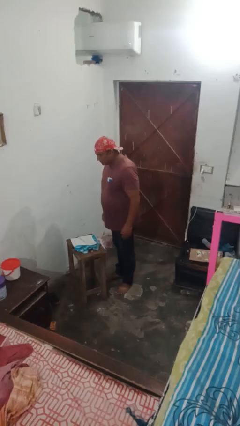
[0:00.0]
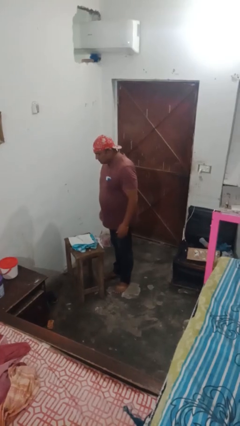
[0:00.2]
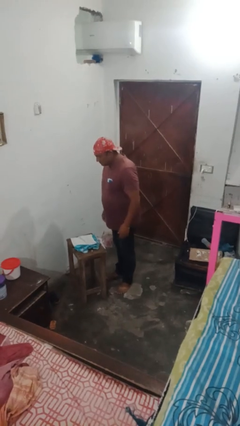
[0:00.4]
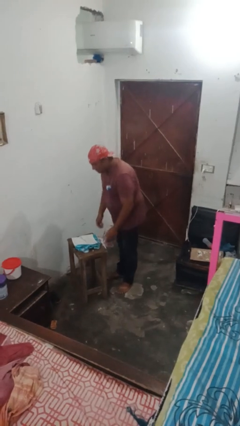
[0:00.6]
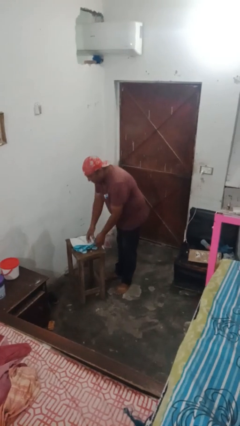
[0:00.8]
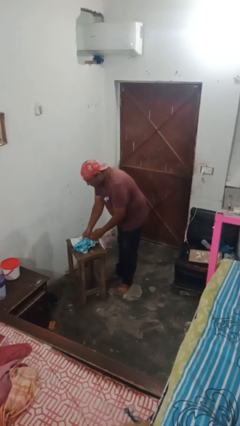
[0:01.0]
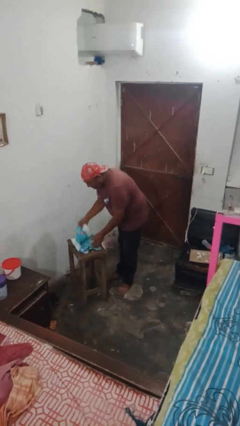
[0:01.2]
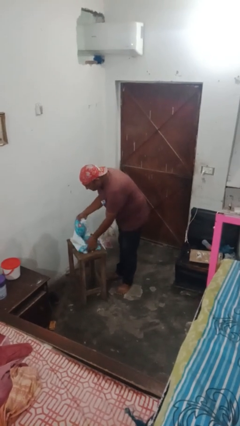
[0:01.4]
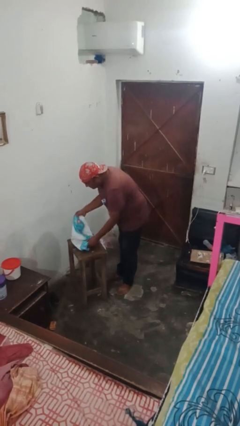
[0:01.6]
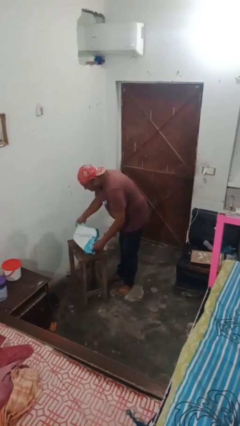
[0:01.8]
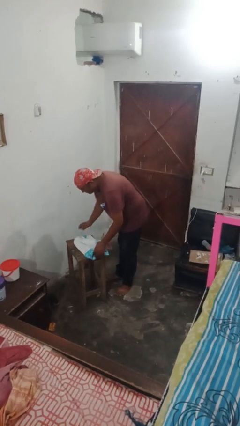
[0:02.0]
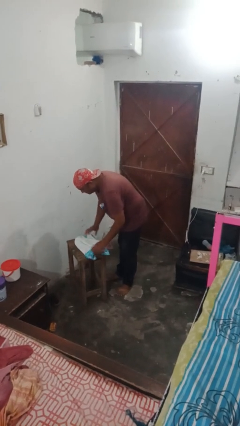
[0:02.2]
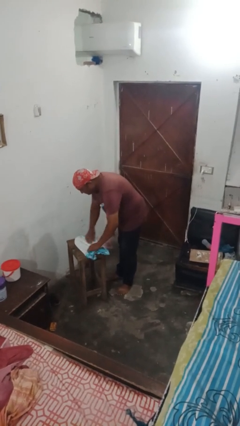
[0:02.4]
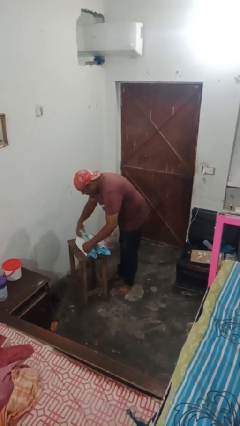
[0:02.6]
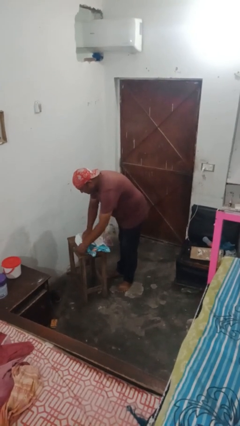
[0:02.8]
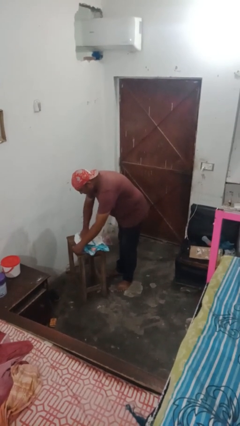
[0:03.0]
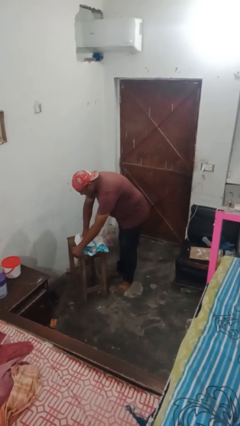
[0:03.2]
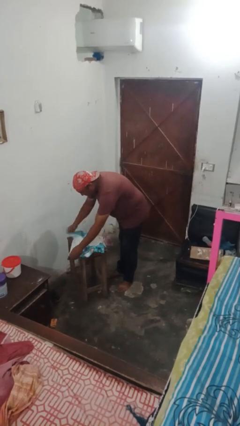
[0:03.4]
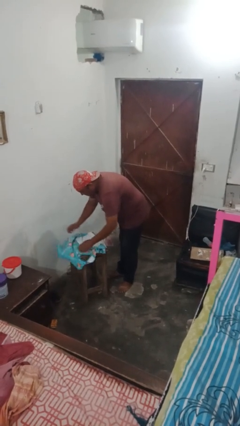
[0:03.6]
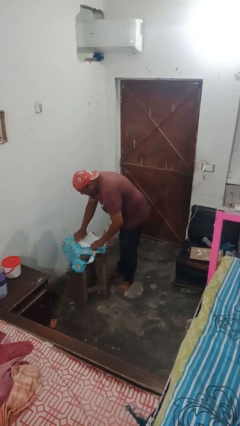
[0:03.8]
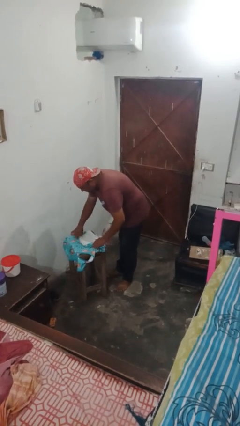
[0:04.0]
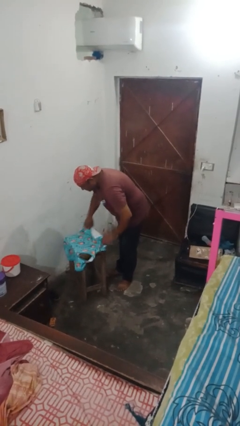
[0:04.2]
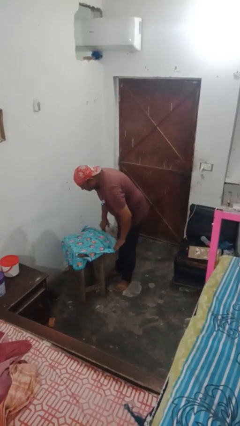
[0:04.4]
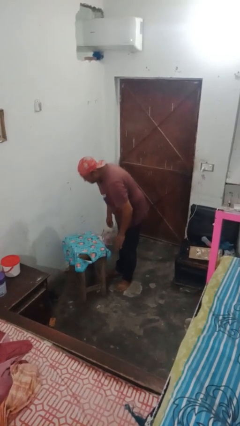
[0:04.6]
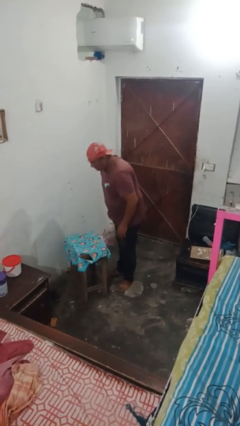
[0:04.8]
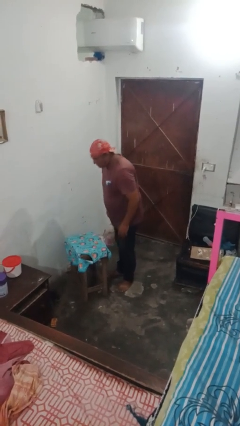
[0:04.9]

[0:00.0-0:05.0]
person folds tablecloth

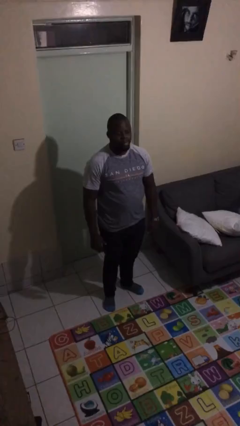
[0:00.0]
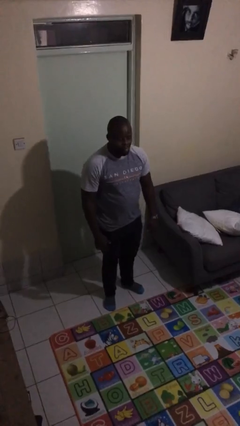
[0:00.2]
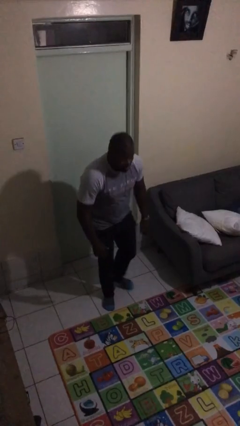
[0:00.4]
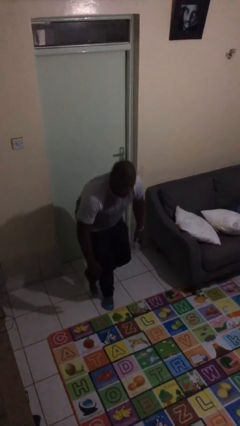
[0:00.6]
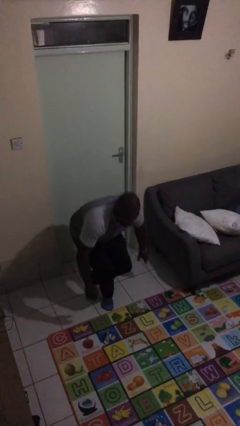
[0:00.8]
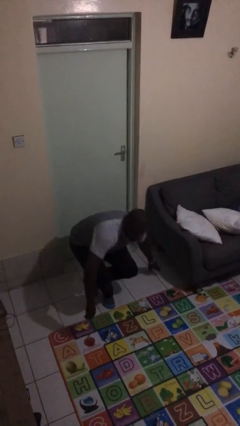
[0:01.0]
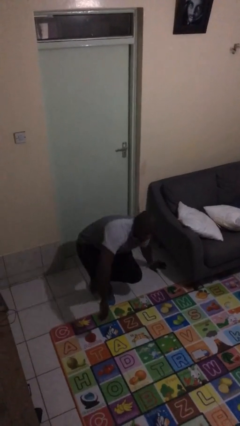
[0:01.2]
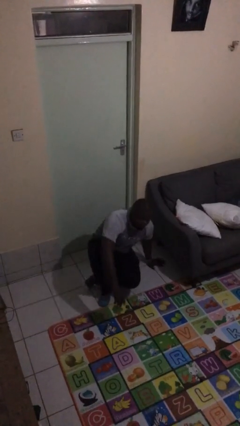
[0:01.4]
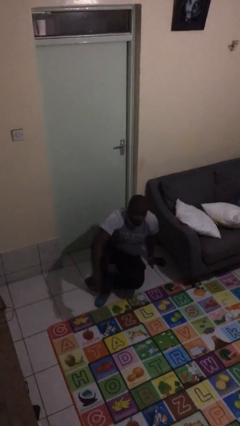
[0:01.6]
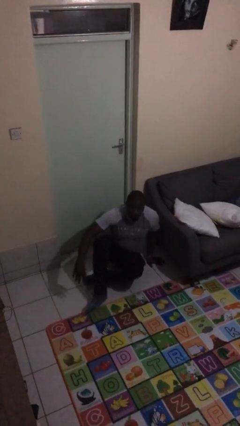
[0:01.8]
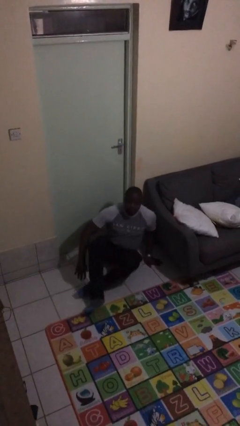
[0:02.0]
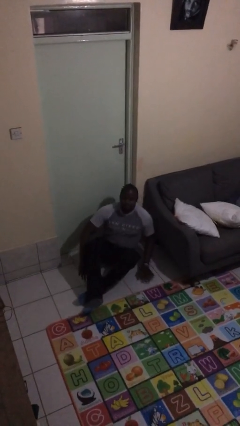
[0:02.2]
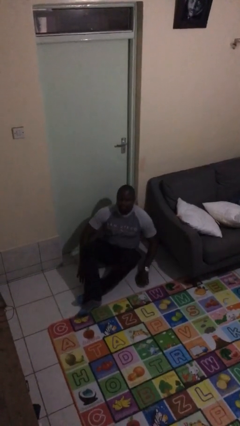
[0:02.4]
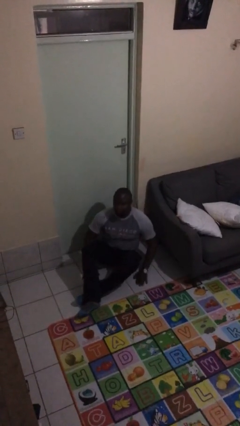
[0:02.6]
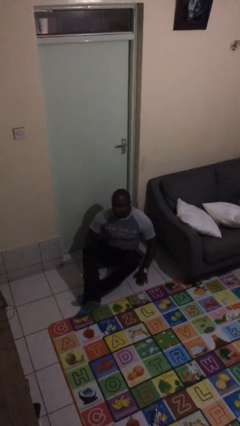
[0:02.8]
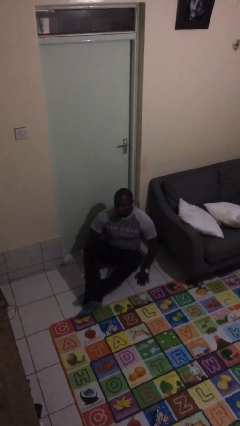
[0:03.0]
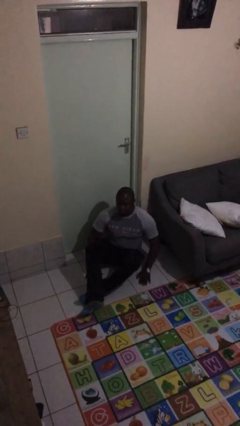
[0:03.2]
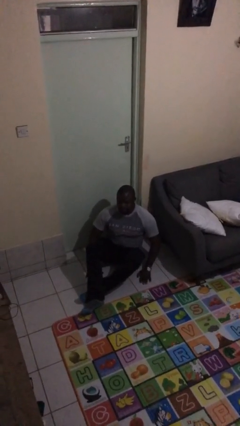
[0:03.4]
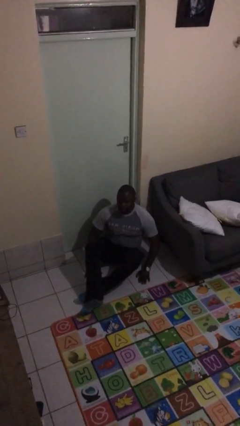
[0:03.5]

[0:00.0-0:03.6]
person sits crisscross

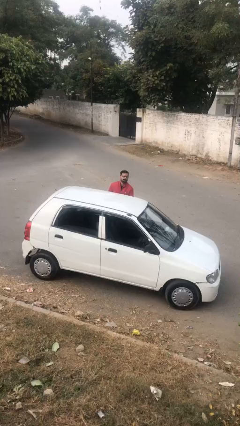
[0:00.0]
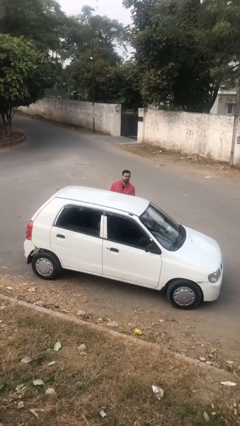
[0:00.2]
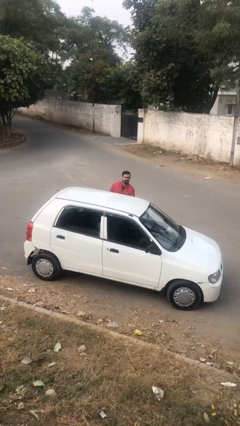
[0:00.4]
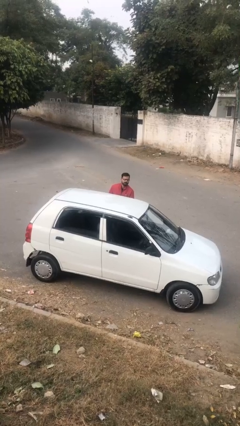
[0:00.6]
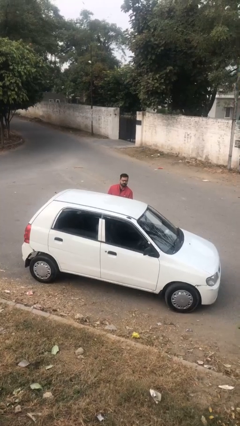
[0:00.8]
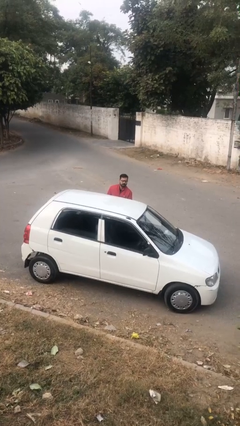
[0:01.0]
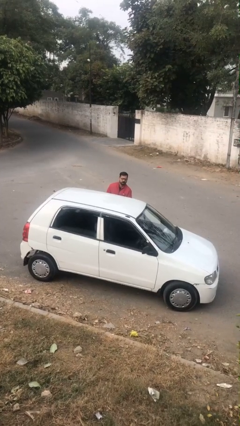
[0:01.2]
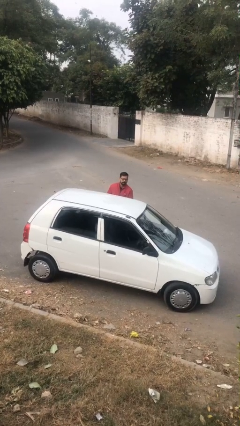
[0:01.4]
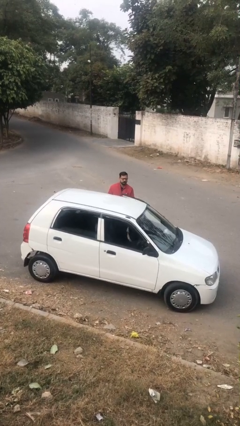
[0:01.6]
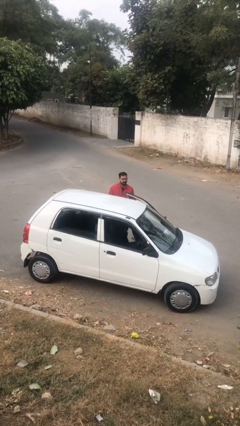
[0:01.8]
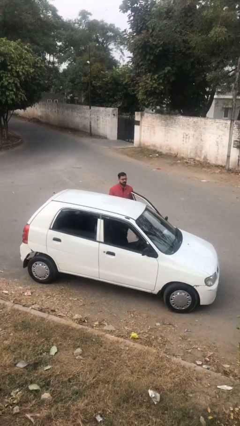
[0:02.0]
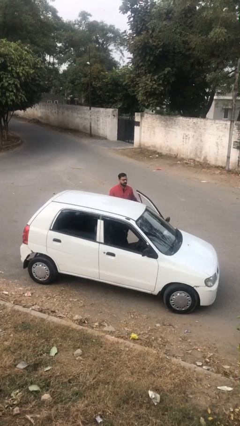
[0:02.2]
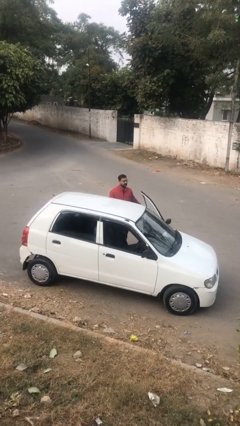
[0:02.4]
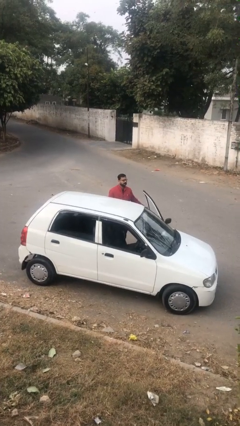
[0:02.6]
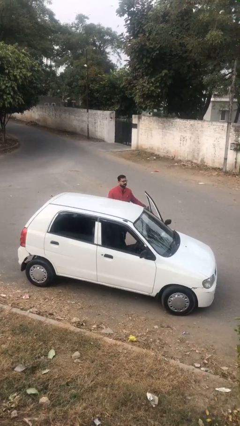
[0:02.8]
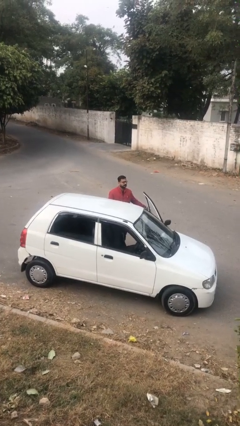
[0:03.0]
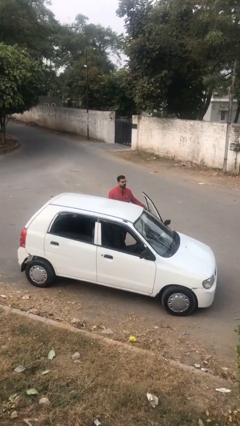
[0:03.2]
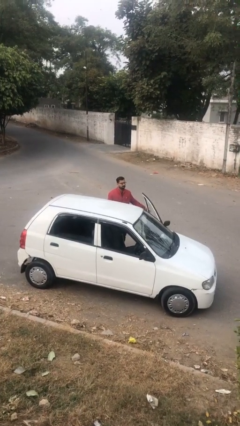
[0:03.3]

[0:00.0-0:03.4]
person opens car door

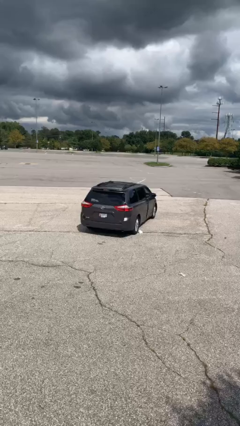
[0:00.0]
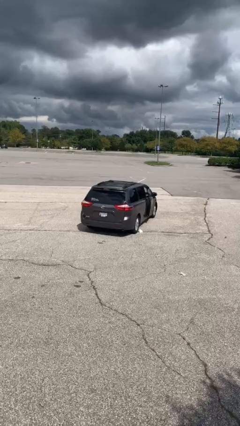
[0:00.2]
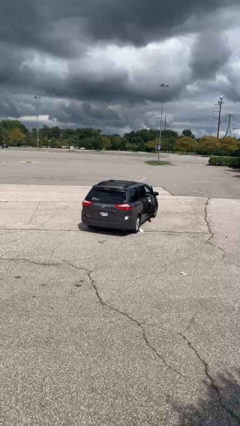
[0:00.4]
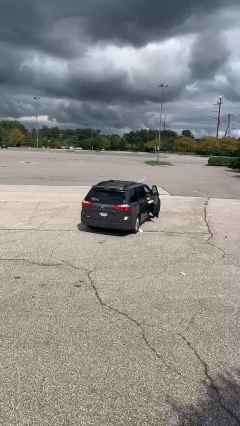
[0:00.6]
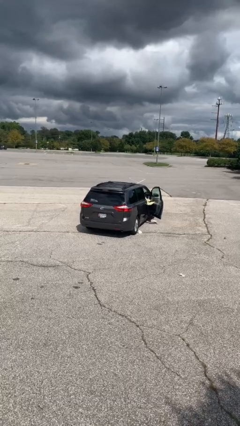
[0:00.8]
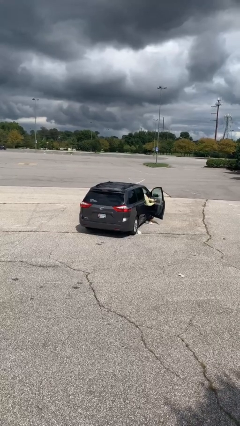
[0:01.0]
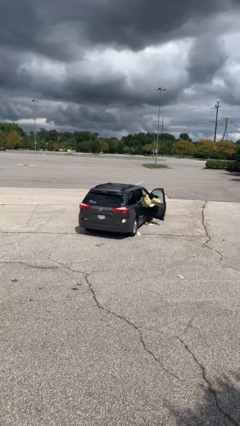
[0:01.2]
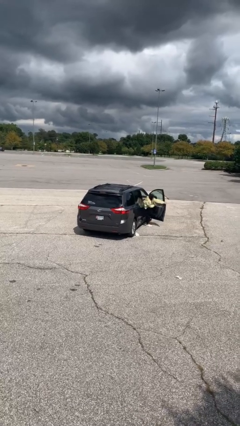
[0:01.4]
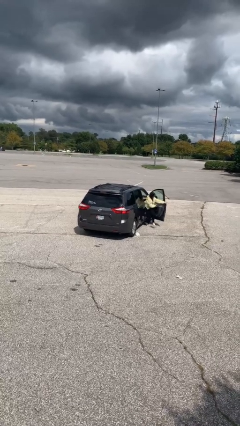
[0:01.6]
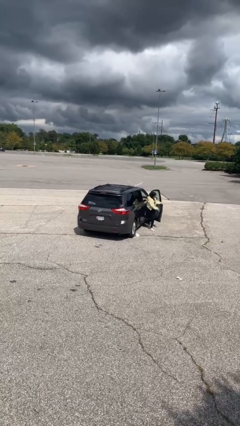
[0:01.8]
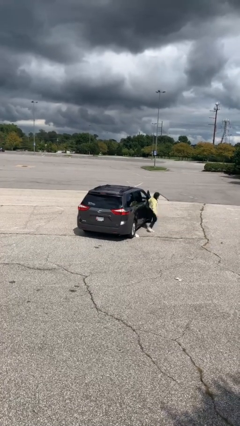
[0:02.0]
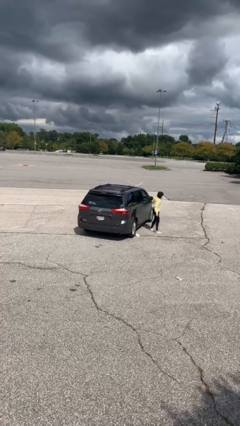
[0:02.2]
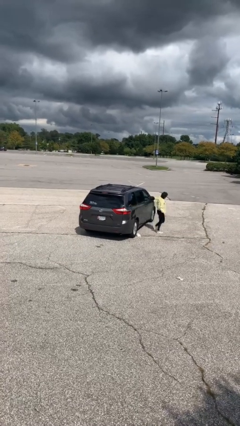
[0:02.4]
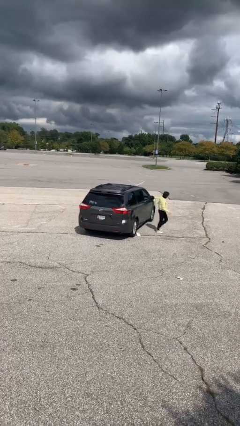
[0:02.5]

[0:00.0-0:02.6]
car drops off person

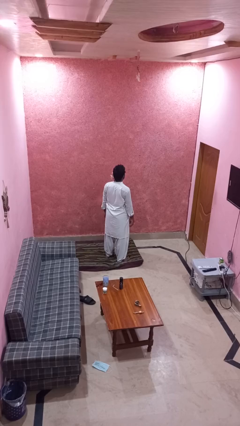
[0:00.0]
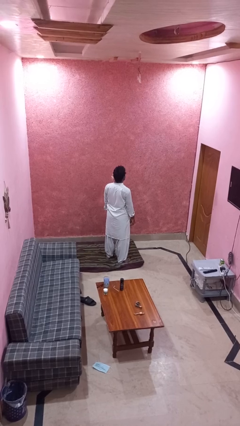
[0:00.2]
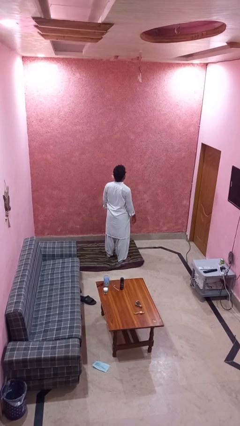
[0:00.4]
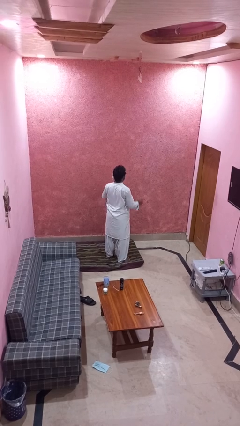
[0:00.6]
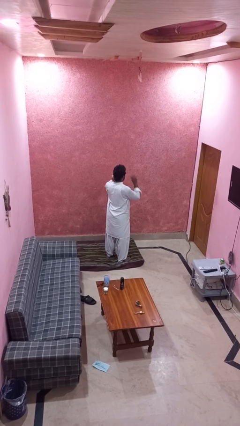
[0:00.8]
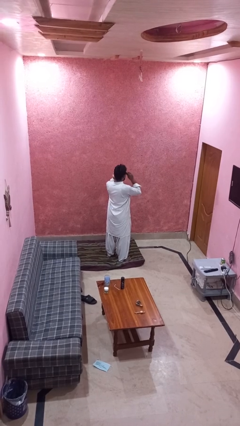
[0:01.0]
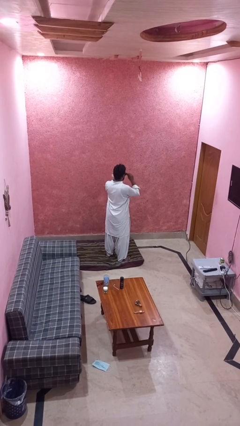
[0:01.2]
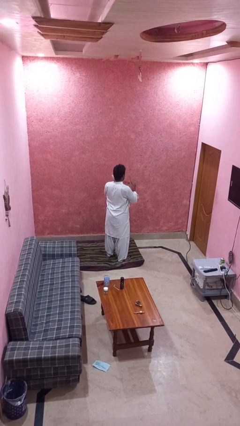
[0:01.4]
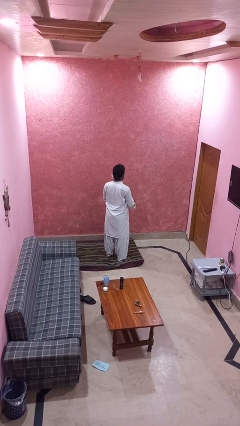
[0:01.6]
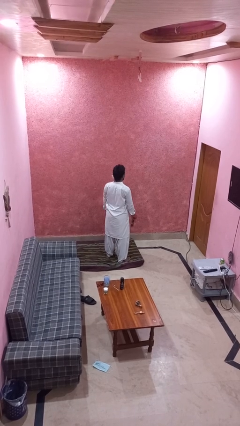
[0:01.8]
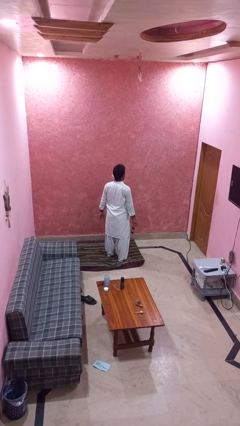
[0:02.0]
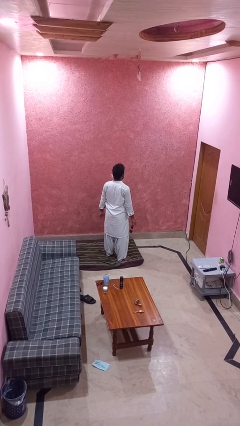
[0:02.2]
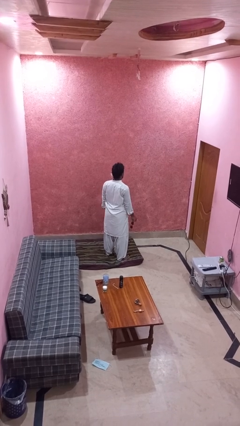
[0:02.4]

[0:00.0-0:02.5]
person takes off sunglasses

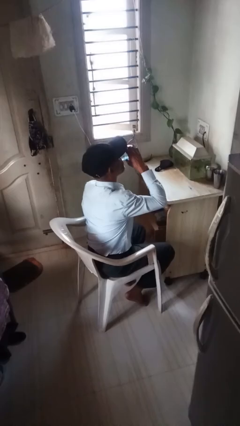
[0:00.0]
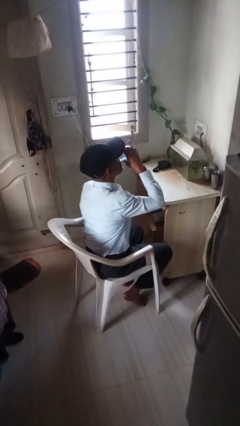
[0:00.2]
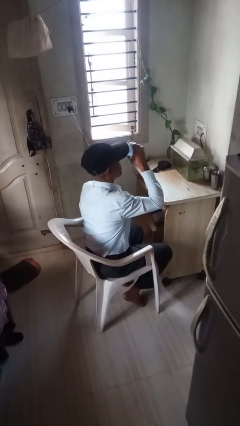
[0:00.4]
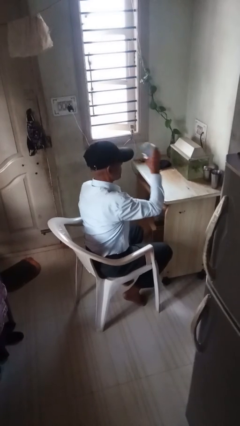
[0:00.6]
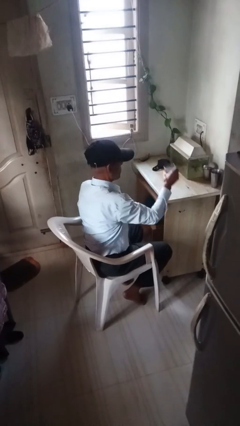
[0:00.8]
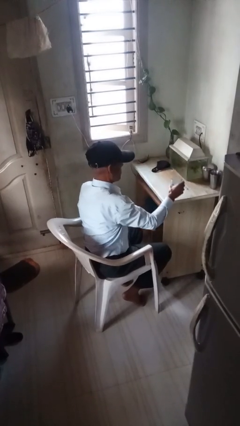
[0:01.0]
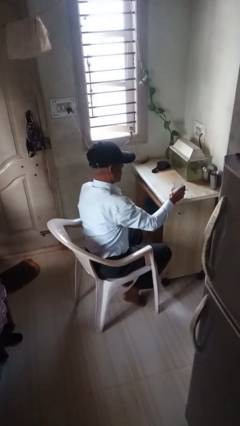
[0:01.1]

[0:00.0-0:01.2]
person puts down object on table
